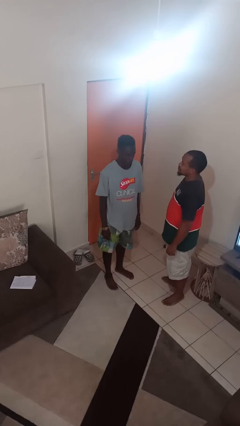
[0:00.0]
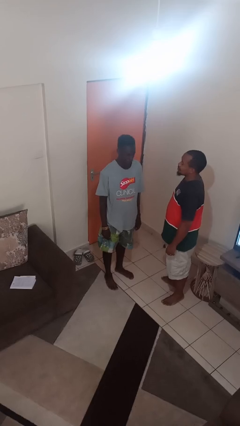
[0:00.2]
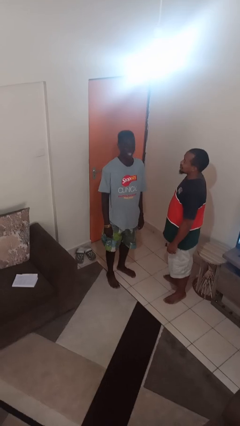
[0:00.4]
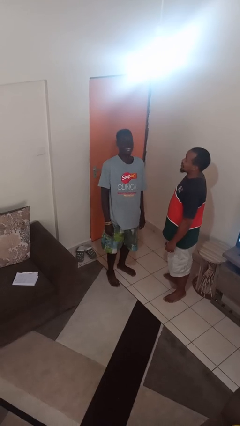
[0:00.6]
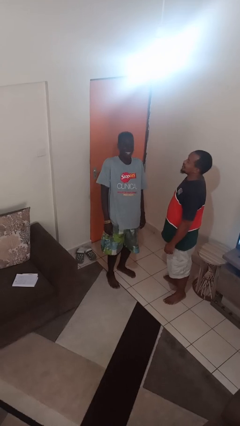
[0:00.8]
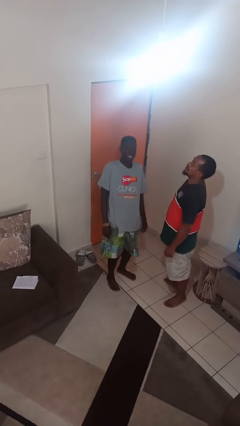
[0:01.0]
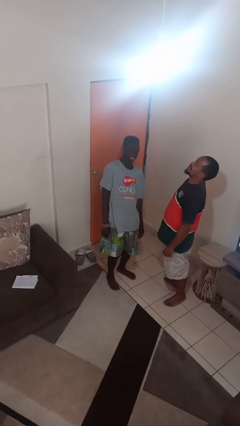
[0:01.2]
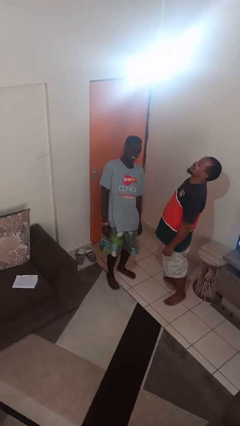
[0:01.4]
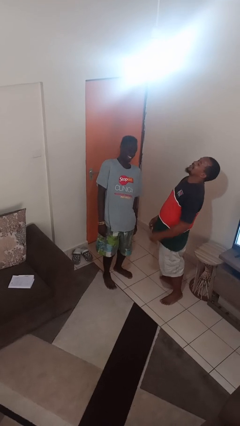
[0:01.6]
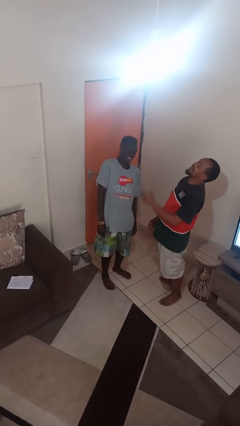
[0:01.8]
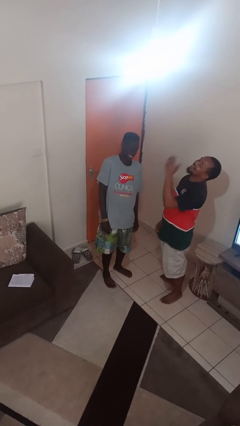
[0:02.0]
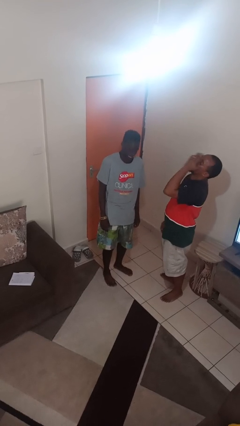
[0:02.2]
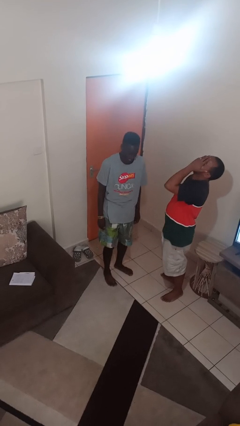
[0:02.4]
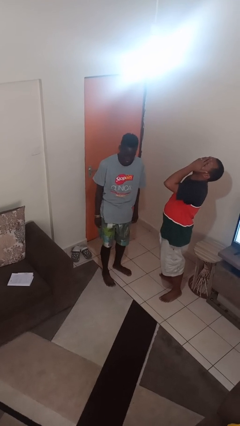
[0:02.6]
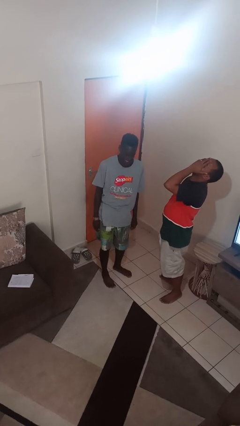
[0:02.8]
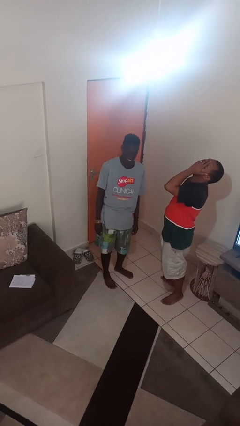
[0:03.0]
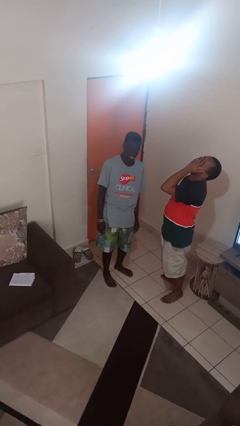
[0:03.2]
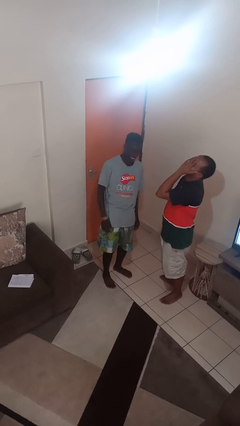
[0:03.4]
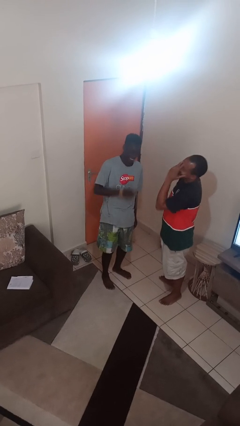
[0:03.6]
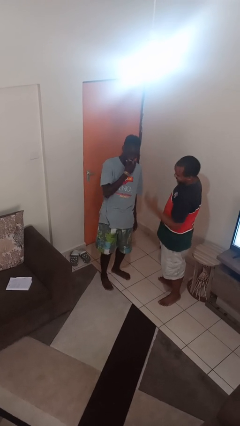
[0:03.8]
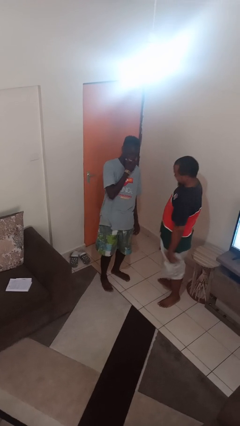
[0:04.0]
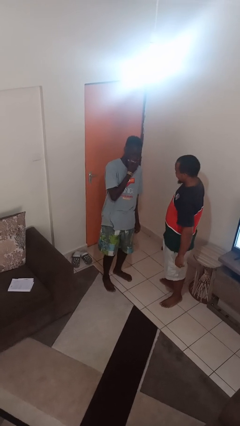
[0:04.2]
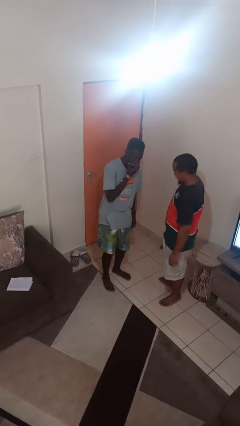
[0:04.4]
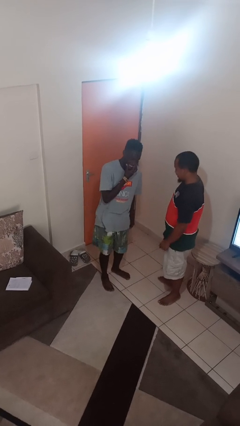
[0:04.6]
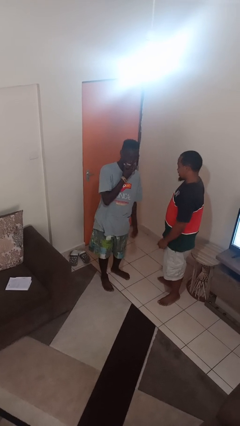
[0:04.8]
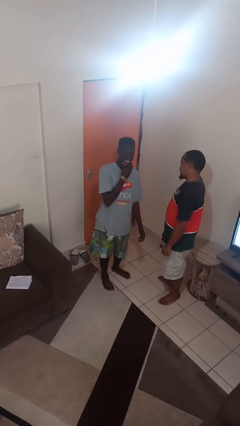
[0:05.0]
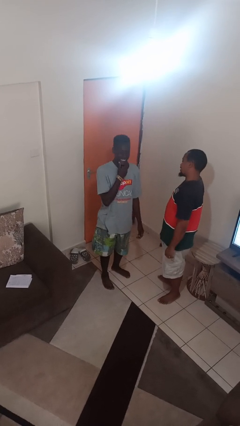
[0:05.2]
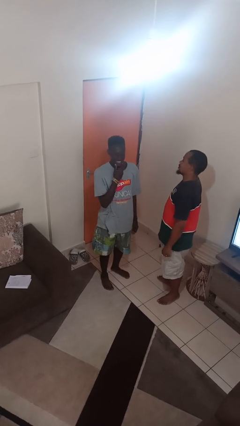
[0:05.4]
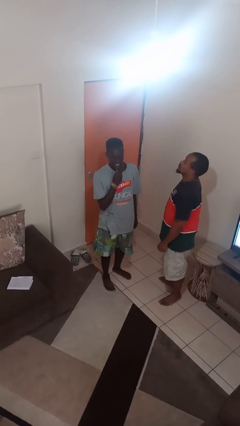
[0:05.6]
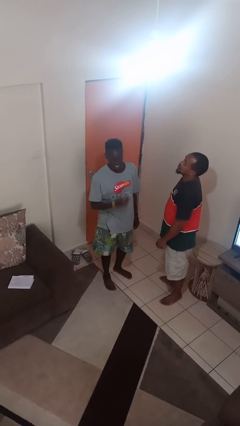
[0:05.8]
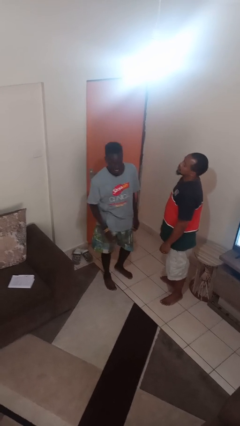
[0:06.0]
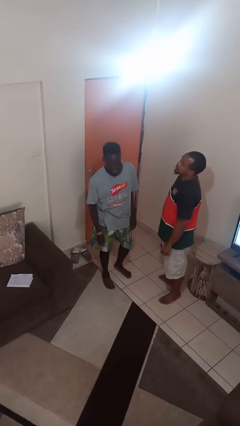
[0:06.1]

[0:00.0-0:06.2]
person laughs with person

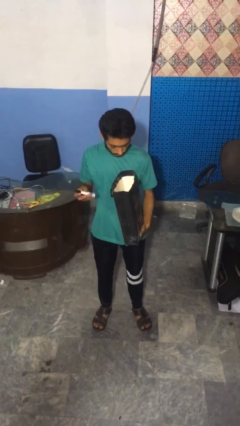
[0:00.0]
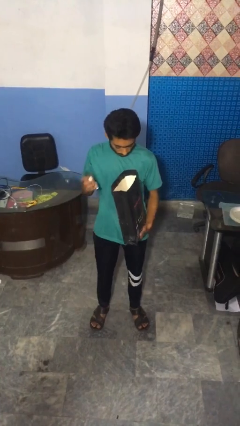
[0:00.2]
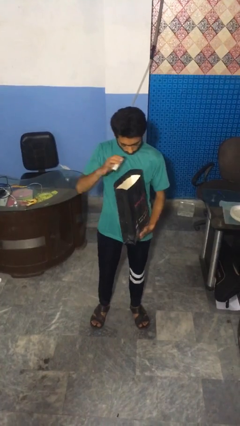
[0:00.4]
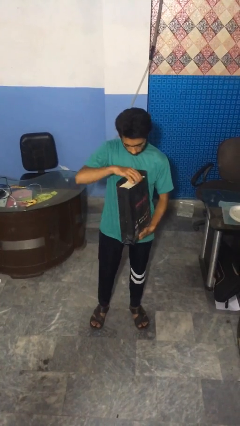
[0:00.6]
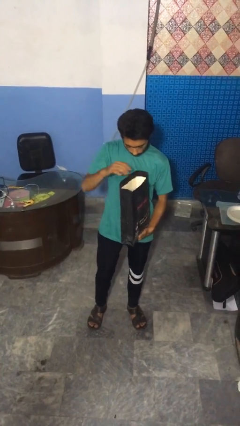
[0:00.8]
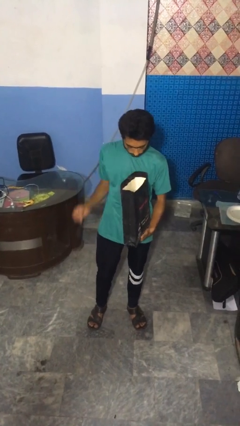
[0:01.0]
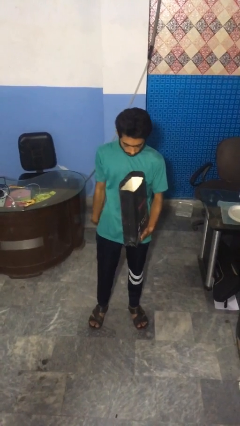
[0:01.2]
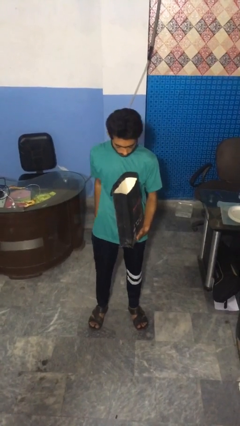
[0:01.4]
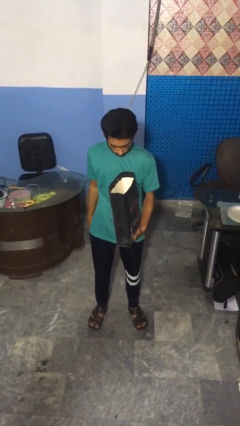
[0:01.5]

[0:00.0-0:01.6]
person puts object into bag

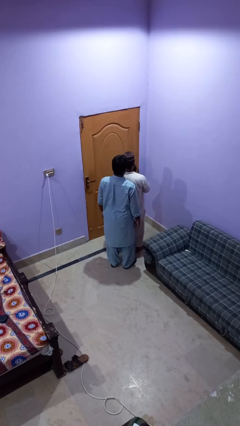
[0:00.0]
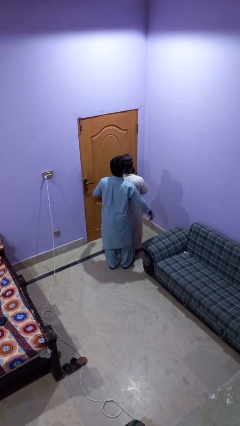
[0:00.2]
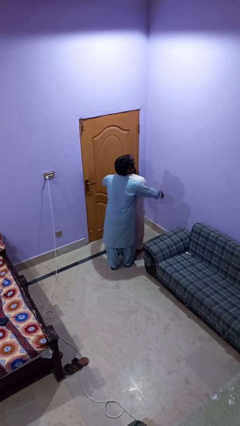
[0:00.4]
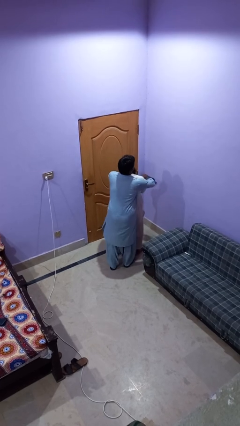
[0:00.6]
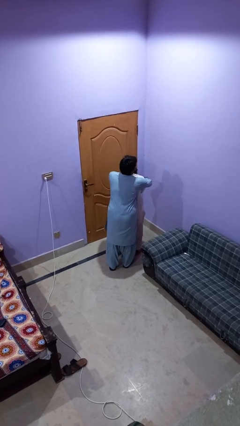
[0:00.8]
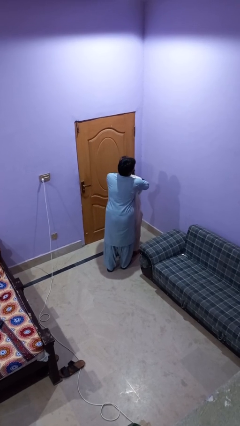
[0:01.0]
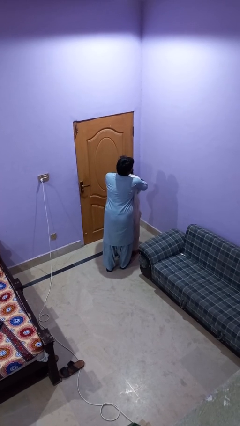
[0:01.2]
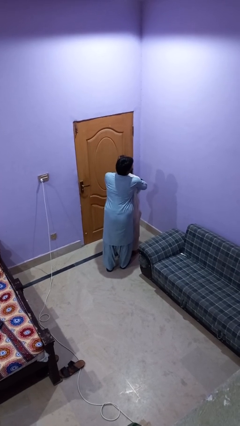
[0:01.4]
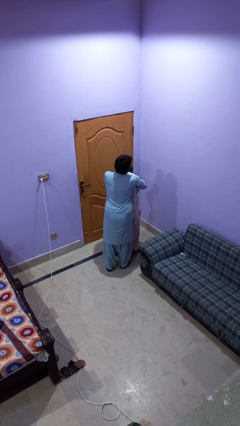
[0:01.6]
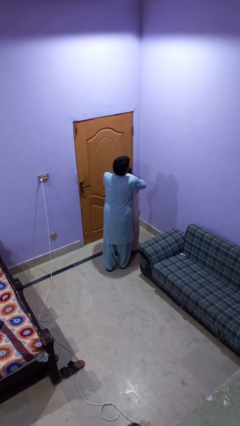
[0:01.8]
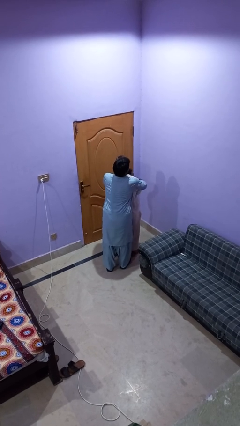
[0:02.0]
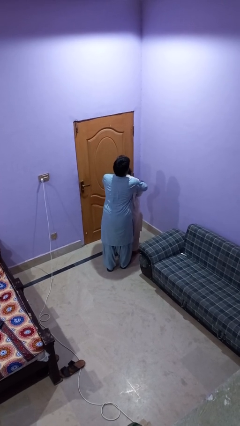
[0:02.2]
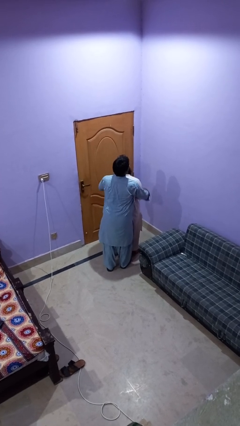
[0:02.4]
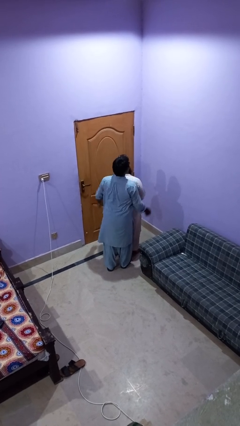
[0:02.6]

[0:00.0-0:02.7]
person hugs person from behind

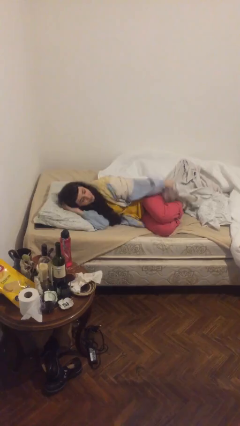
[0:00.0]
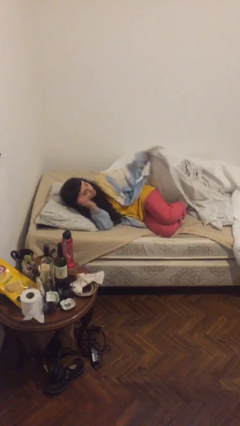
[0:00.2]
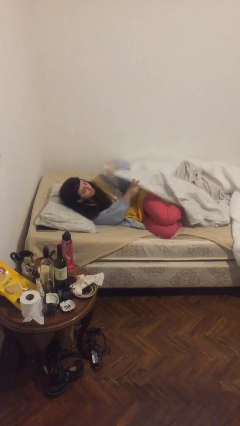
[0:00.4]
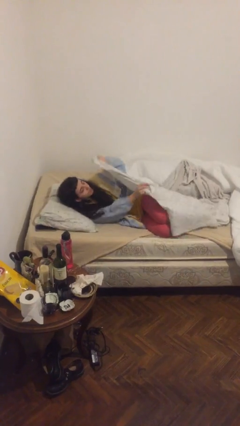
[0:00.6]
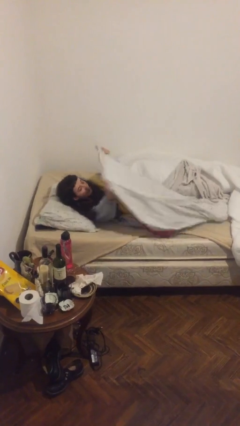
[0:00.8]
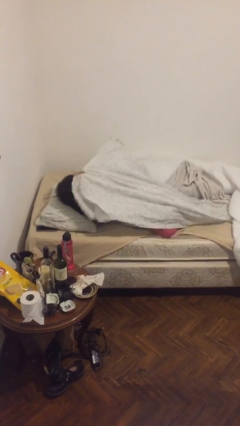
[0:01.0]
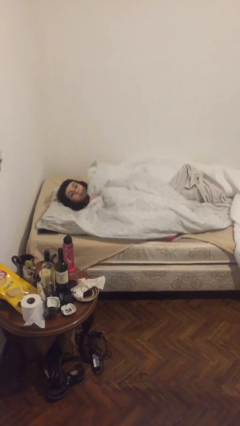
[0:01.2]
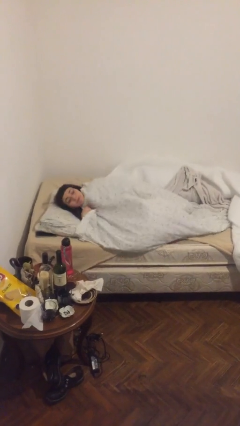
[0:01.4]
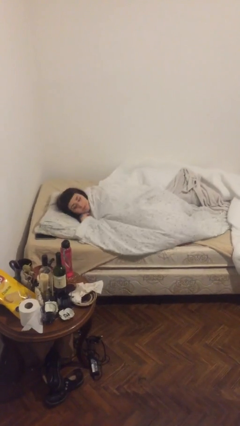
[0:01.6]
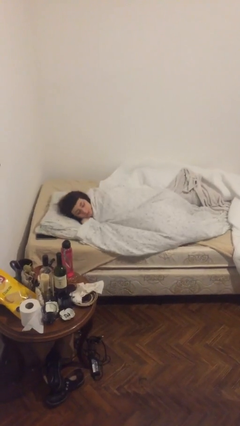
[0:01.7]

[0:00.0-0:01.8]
person covers with bedsheets

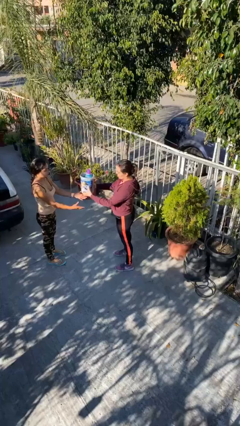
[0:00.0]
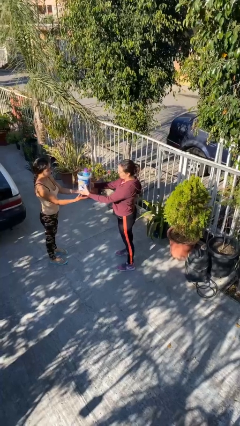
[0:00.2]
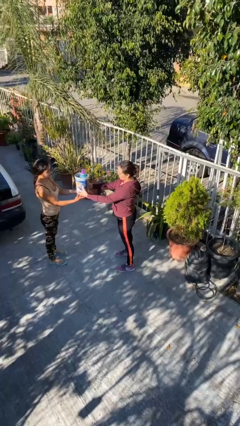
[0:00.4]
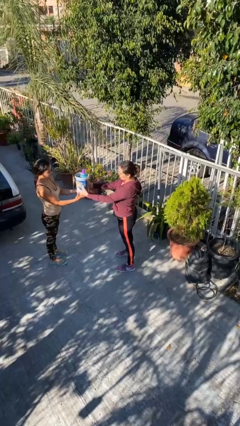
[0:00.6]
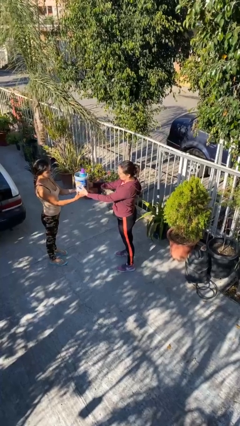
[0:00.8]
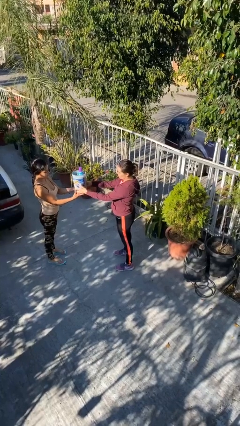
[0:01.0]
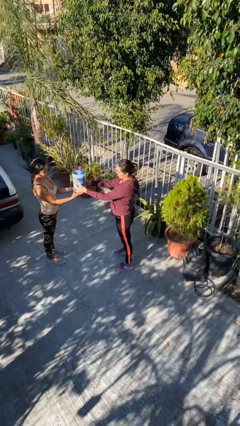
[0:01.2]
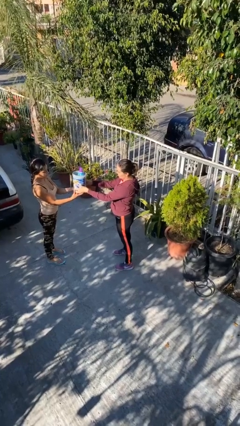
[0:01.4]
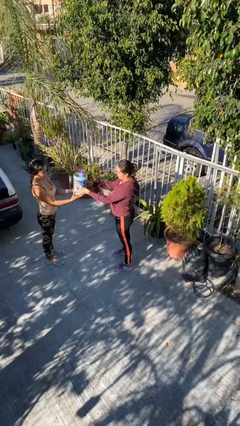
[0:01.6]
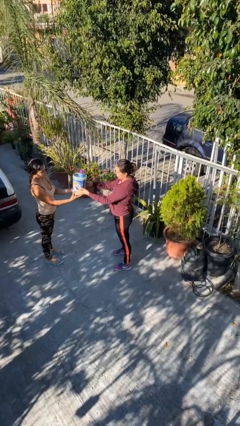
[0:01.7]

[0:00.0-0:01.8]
person transfers object to person

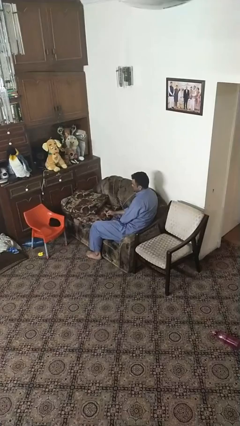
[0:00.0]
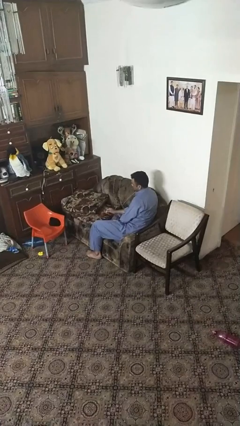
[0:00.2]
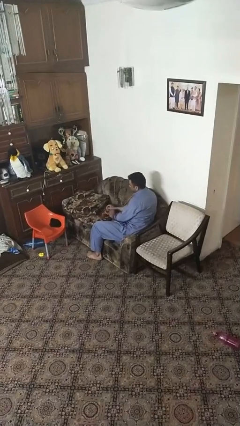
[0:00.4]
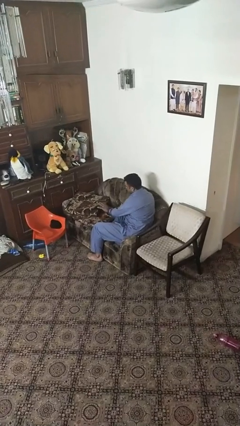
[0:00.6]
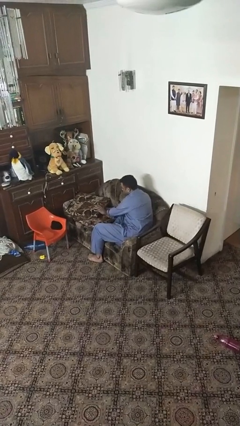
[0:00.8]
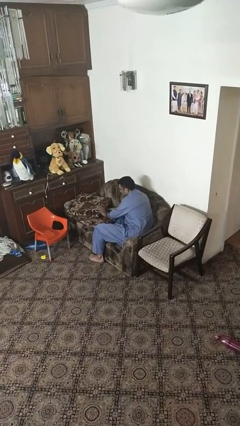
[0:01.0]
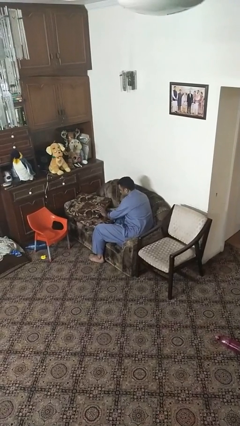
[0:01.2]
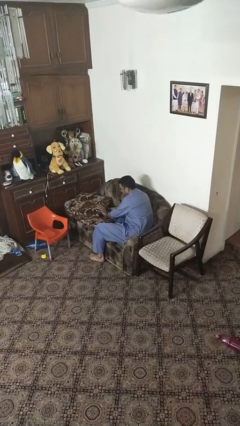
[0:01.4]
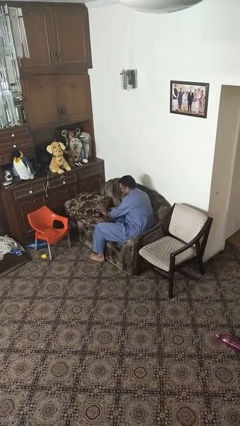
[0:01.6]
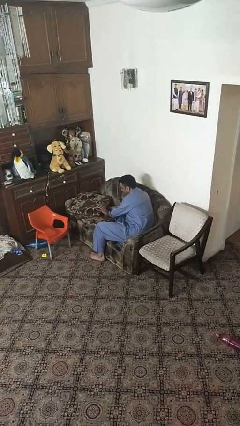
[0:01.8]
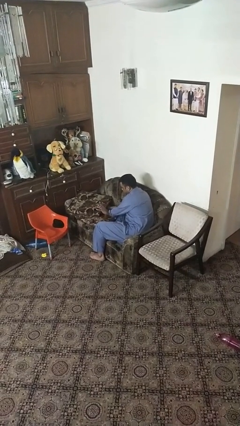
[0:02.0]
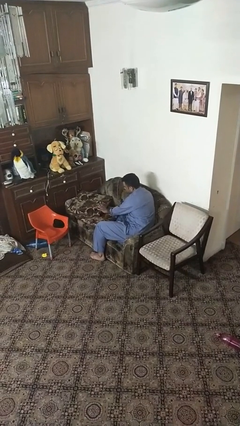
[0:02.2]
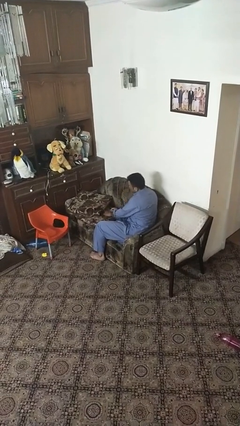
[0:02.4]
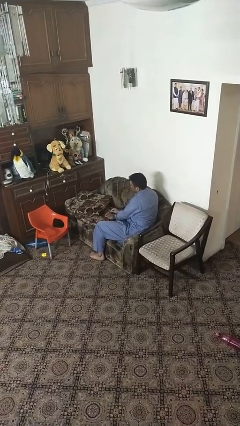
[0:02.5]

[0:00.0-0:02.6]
person searches in couch

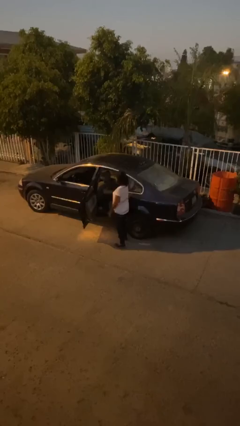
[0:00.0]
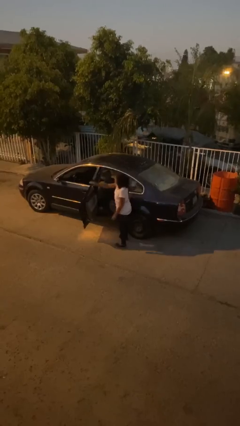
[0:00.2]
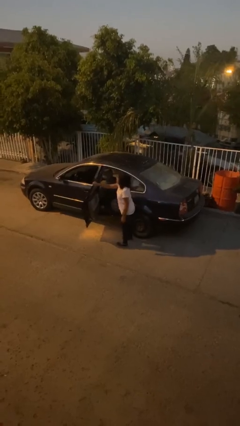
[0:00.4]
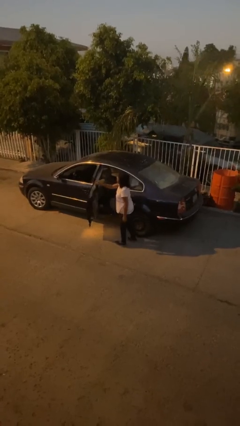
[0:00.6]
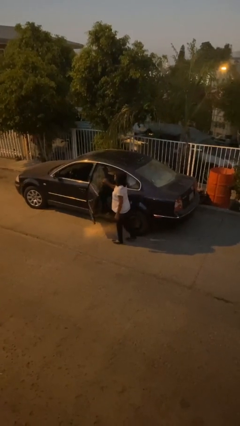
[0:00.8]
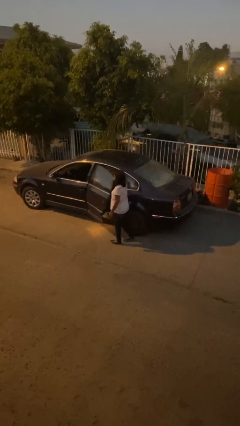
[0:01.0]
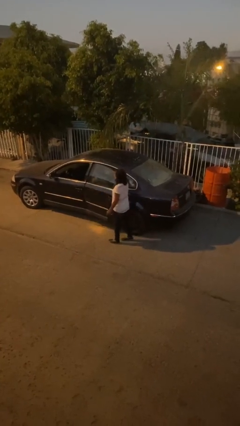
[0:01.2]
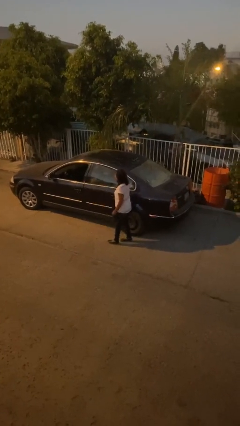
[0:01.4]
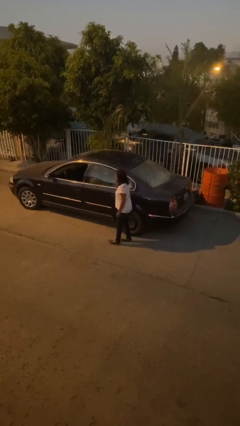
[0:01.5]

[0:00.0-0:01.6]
person closes car door
